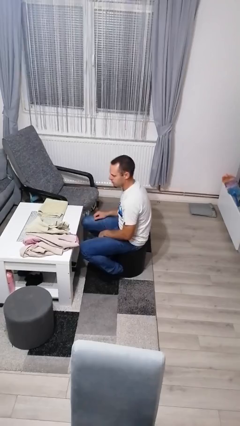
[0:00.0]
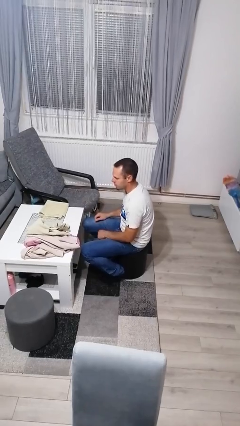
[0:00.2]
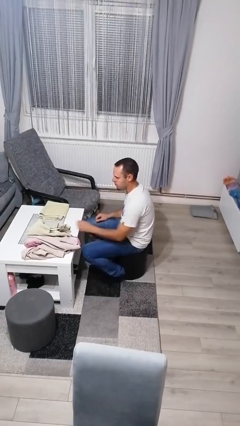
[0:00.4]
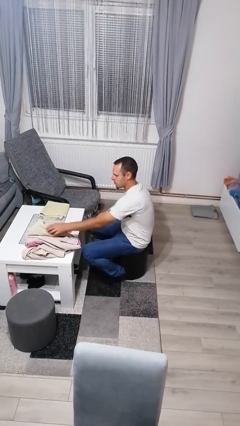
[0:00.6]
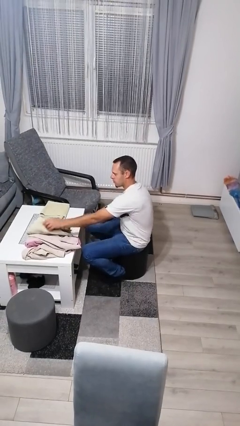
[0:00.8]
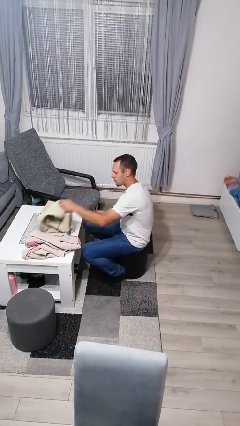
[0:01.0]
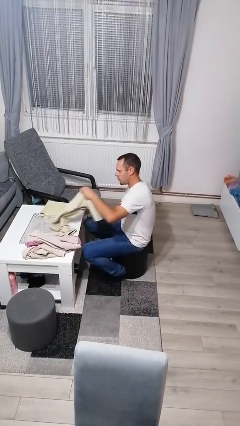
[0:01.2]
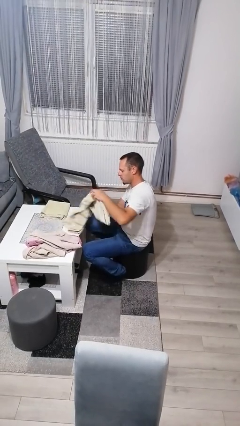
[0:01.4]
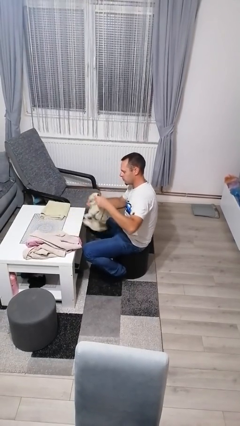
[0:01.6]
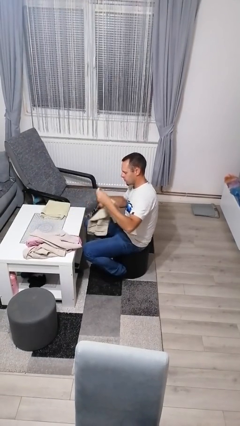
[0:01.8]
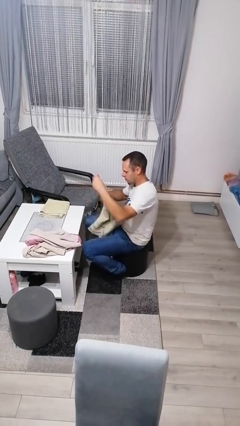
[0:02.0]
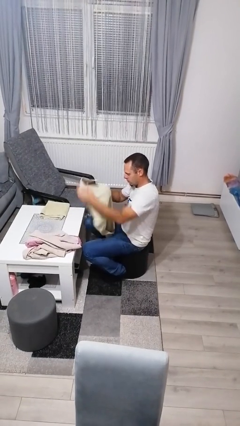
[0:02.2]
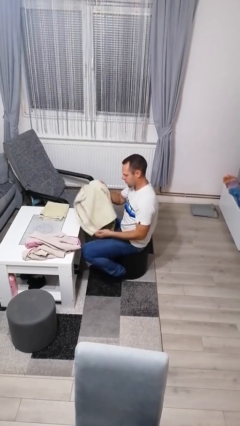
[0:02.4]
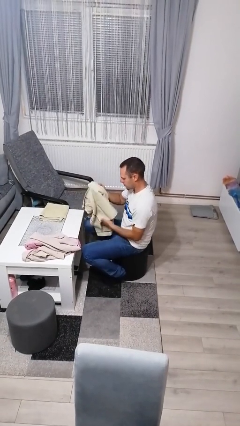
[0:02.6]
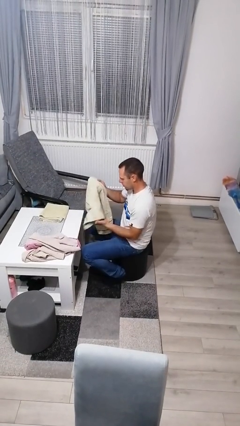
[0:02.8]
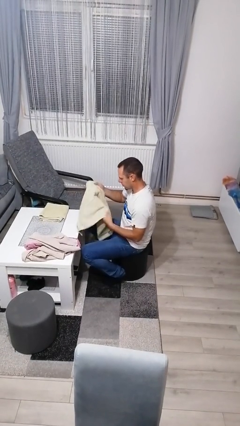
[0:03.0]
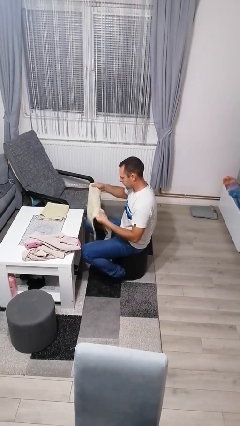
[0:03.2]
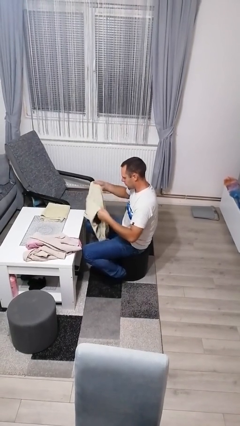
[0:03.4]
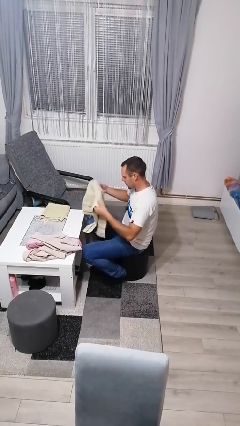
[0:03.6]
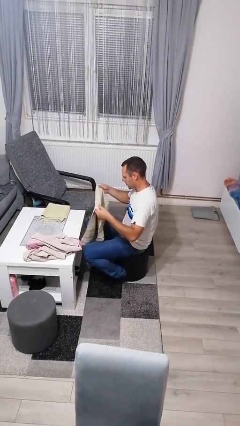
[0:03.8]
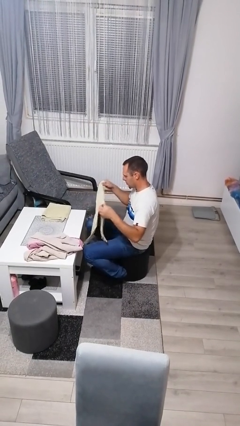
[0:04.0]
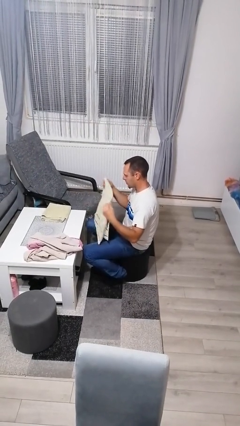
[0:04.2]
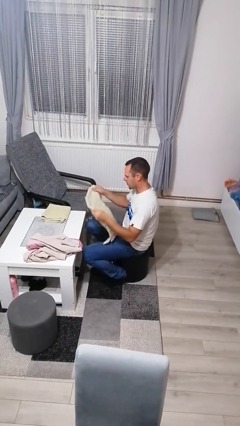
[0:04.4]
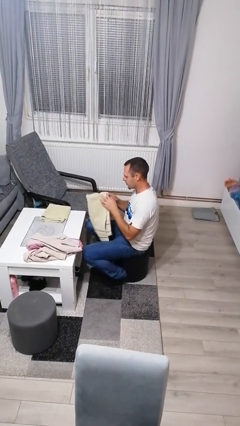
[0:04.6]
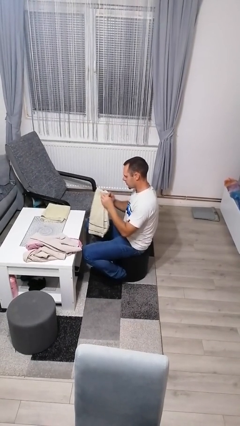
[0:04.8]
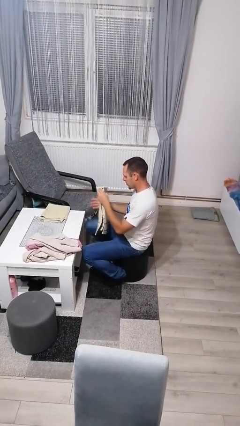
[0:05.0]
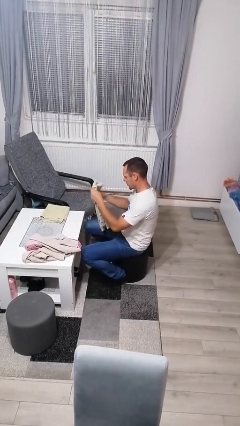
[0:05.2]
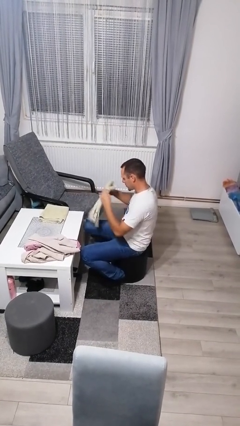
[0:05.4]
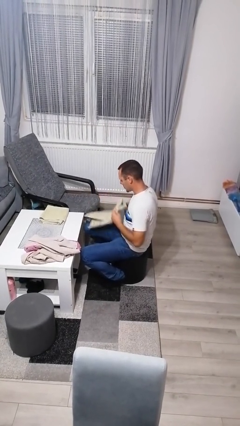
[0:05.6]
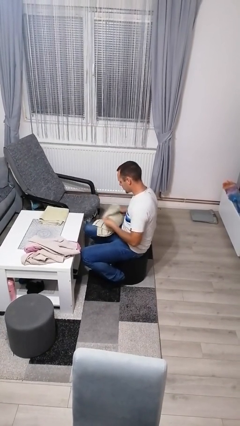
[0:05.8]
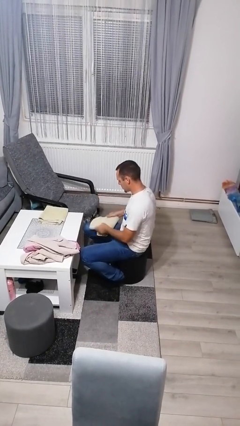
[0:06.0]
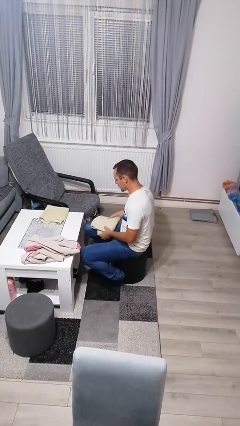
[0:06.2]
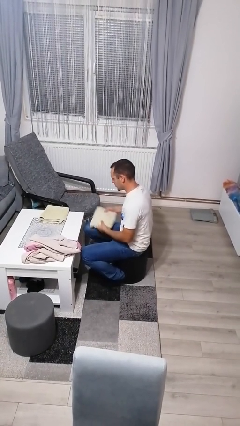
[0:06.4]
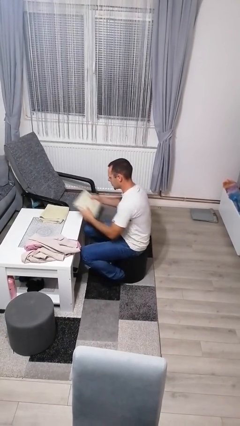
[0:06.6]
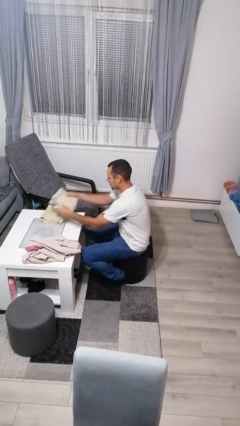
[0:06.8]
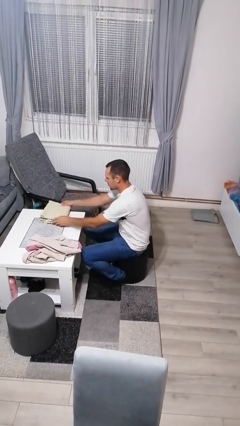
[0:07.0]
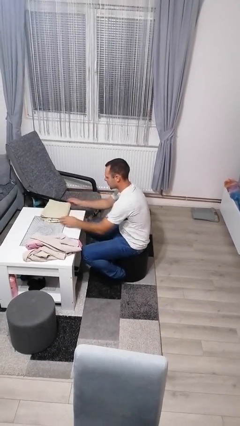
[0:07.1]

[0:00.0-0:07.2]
person folds towel

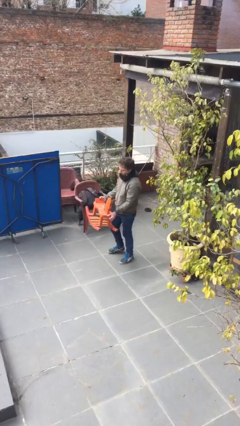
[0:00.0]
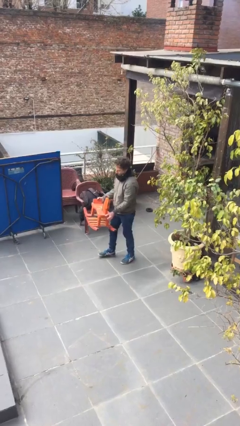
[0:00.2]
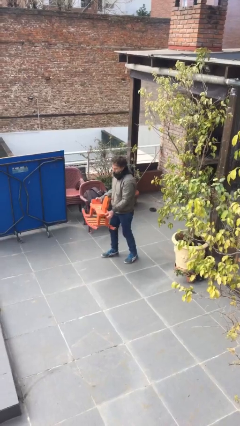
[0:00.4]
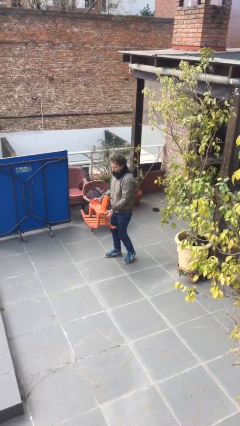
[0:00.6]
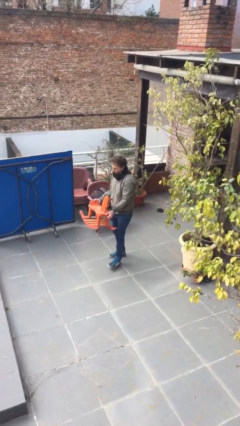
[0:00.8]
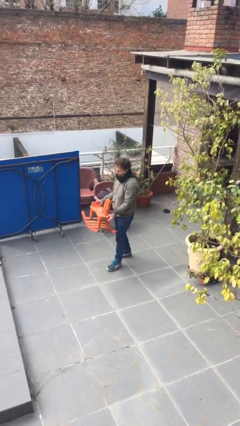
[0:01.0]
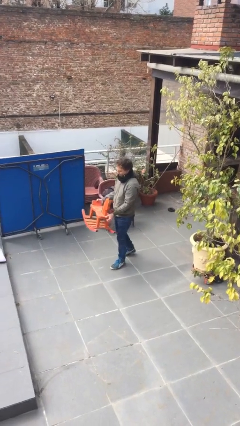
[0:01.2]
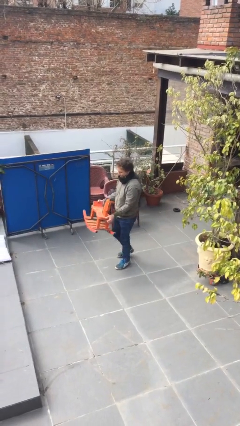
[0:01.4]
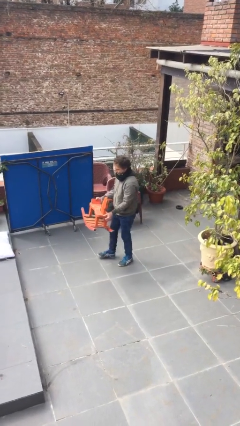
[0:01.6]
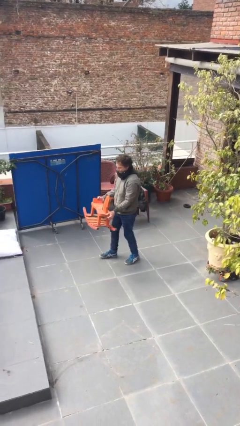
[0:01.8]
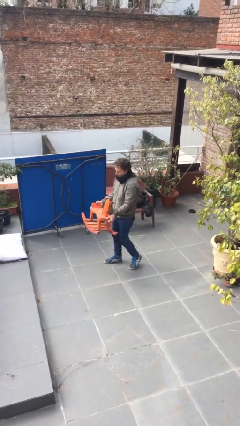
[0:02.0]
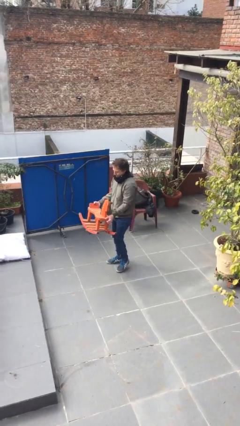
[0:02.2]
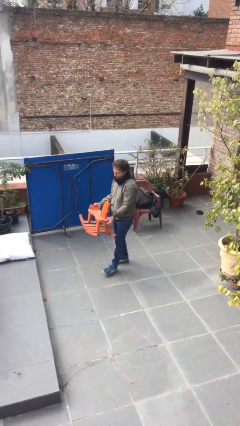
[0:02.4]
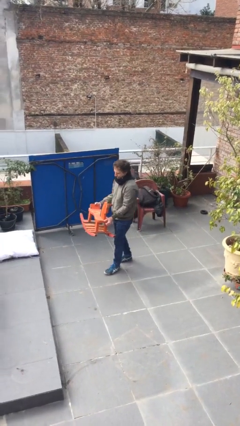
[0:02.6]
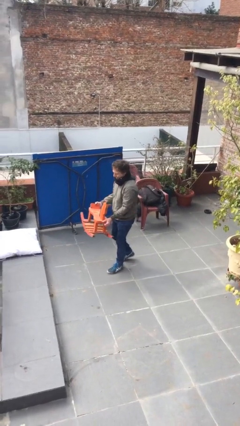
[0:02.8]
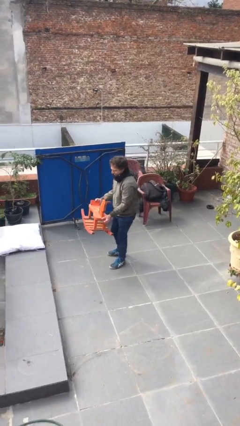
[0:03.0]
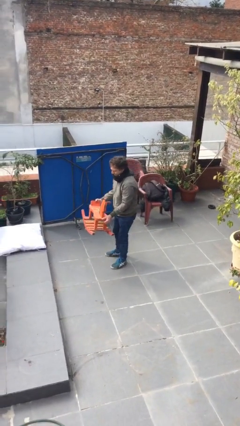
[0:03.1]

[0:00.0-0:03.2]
person carries heavy object

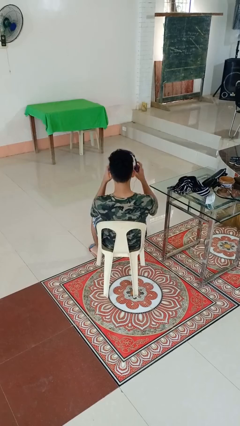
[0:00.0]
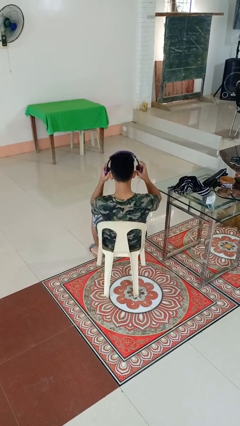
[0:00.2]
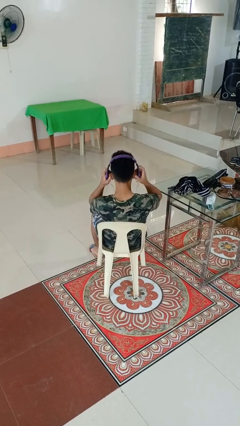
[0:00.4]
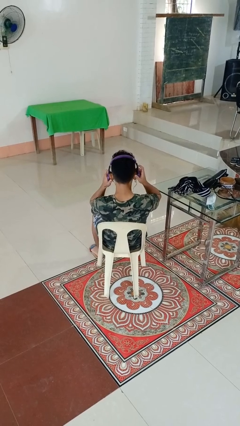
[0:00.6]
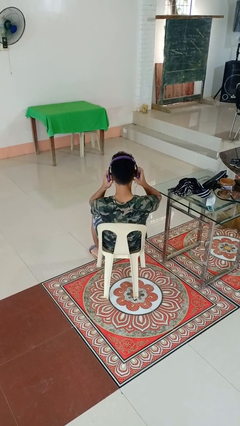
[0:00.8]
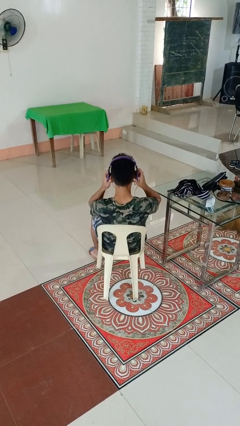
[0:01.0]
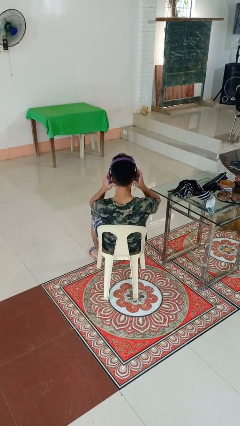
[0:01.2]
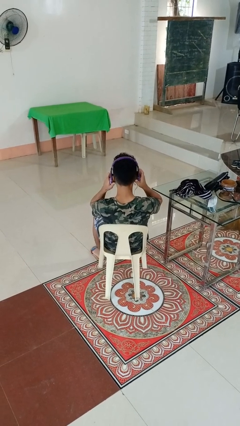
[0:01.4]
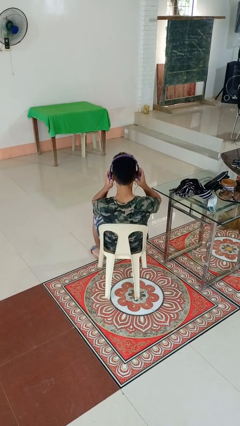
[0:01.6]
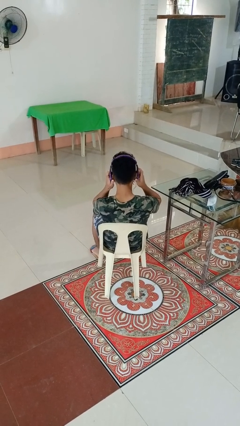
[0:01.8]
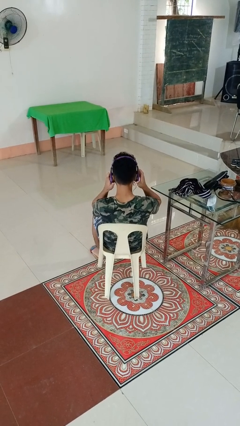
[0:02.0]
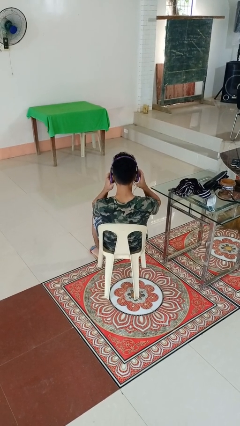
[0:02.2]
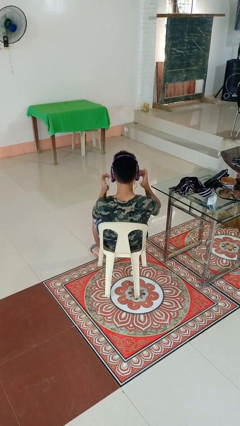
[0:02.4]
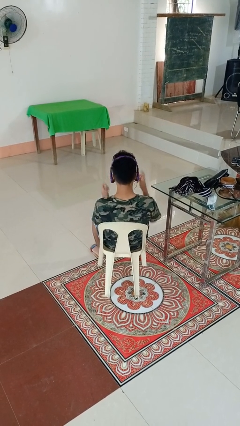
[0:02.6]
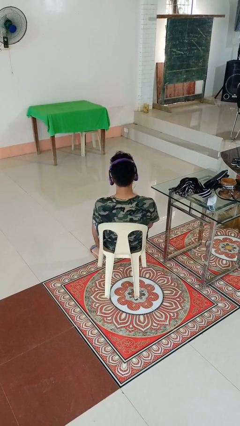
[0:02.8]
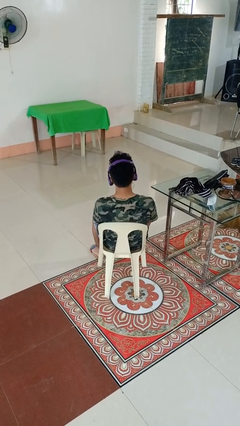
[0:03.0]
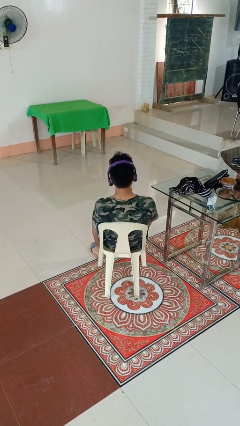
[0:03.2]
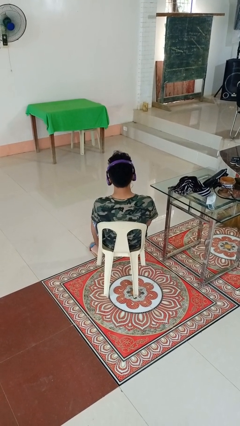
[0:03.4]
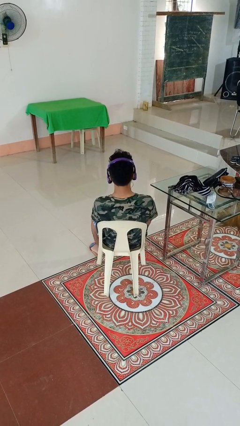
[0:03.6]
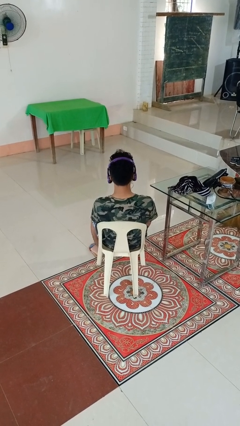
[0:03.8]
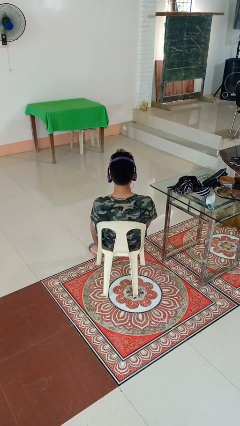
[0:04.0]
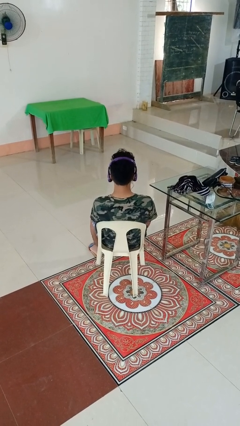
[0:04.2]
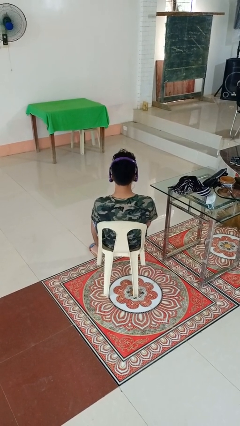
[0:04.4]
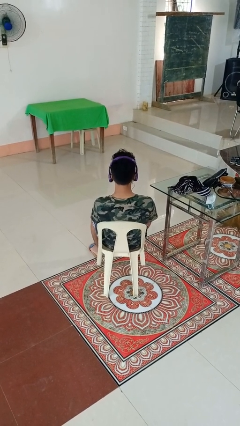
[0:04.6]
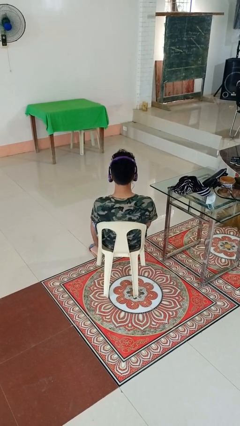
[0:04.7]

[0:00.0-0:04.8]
person puts on headphones

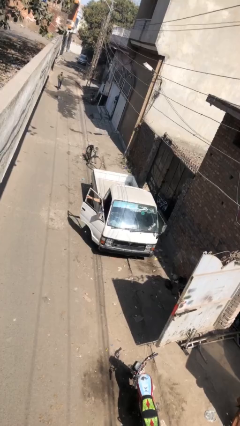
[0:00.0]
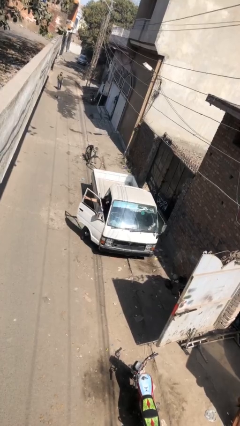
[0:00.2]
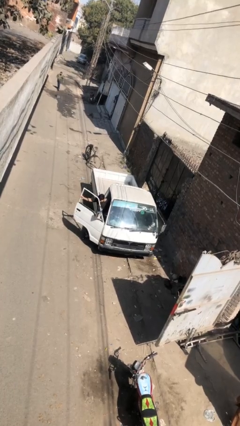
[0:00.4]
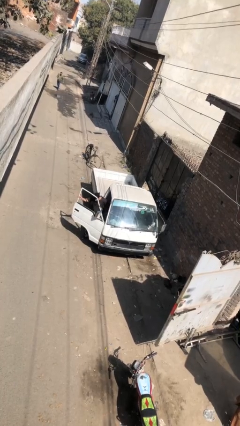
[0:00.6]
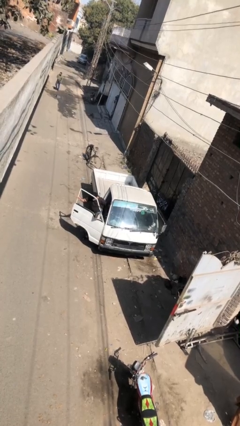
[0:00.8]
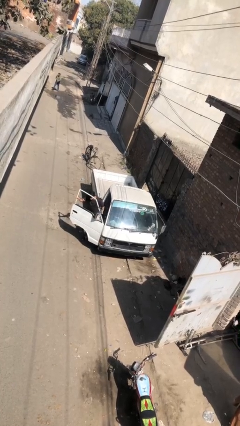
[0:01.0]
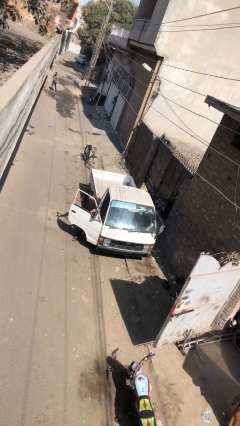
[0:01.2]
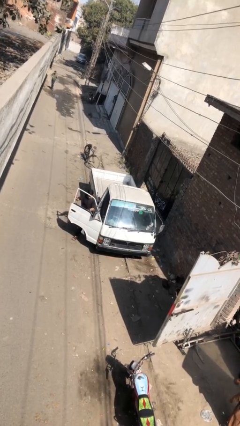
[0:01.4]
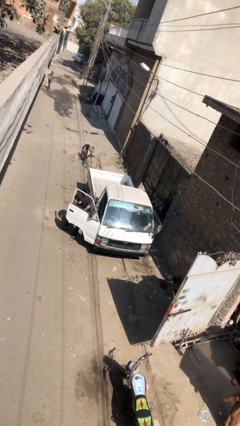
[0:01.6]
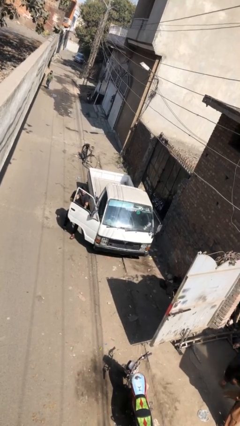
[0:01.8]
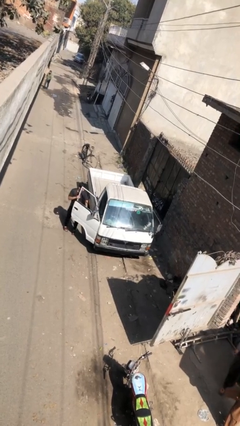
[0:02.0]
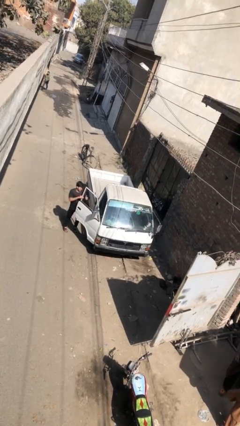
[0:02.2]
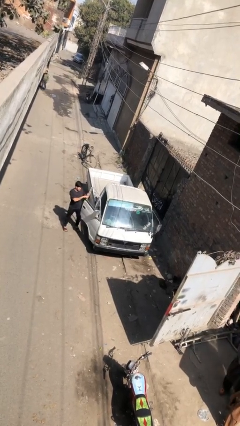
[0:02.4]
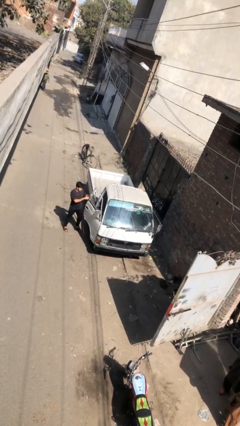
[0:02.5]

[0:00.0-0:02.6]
car drops off person

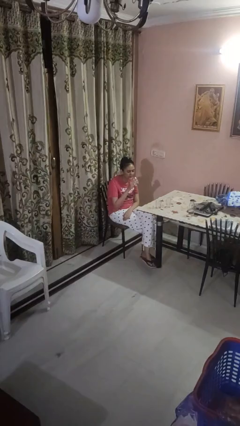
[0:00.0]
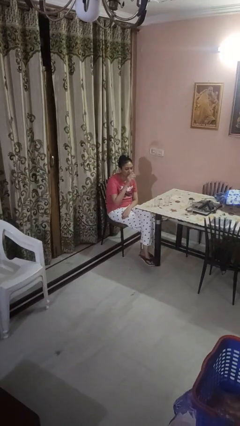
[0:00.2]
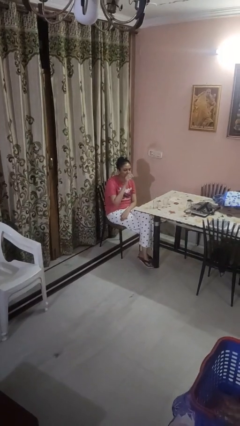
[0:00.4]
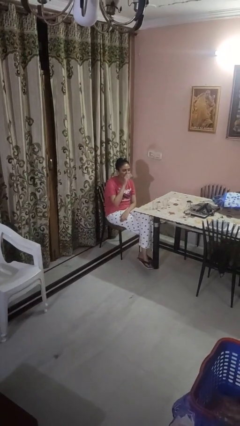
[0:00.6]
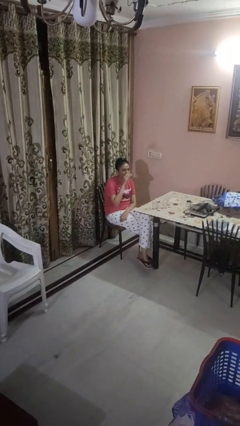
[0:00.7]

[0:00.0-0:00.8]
person picks up object from table
